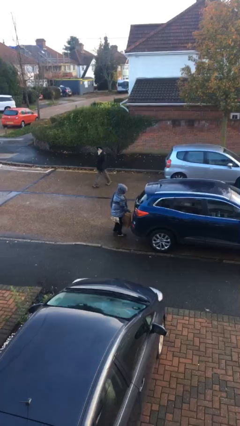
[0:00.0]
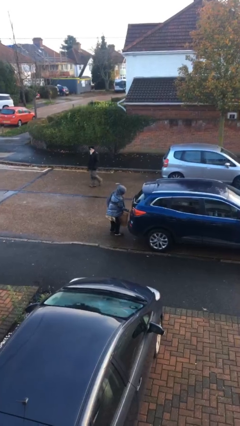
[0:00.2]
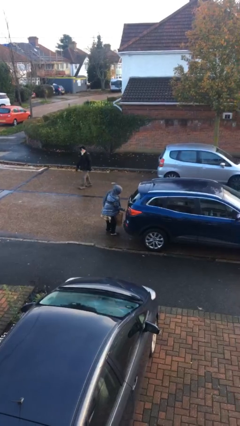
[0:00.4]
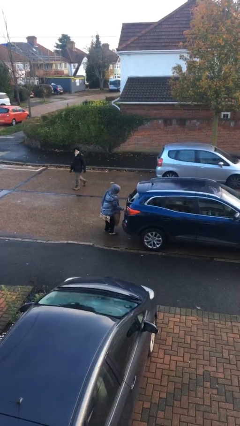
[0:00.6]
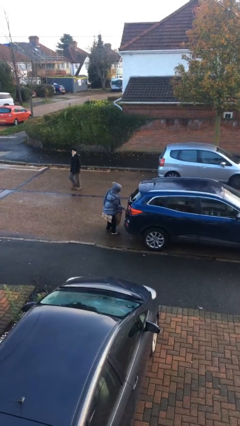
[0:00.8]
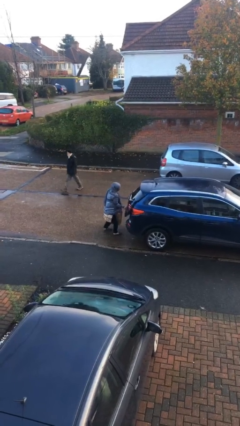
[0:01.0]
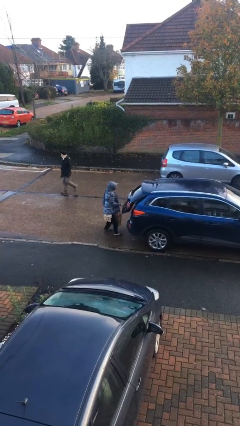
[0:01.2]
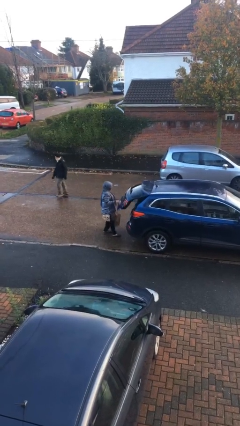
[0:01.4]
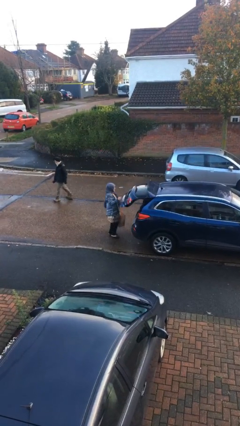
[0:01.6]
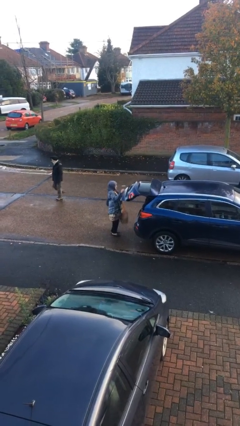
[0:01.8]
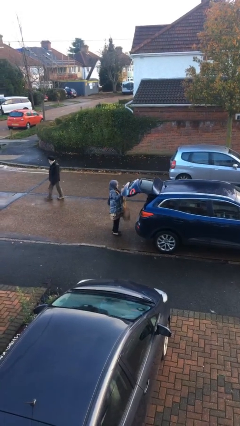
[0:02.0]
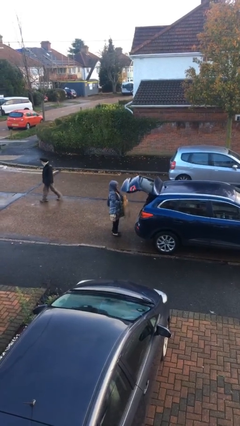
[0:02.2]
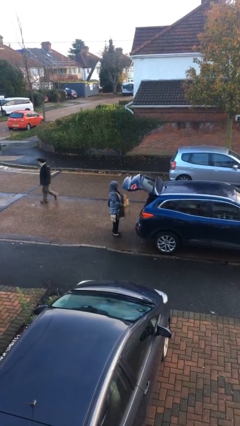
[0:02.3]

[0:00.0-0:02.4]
person opens car trunk

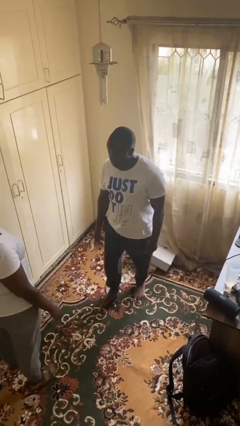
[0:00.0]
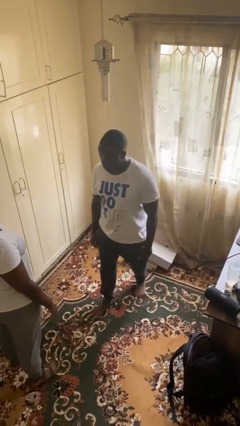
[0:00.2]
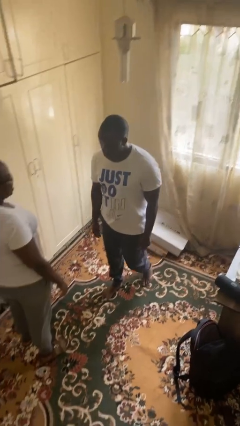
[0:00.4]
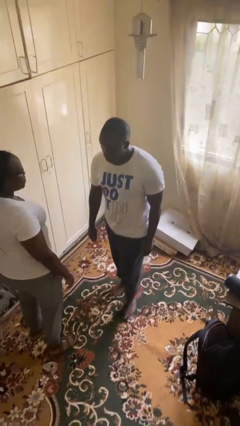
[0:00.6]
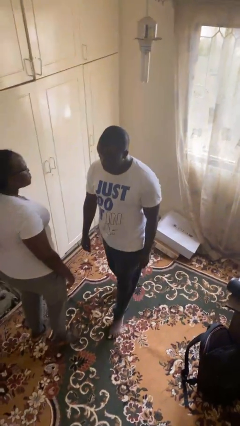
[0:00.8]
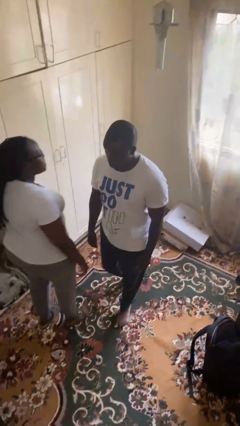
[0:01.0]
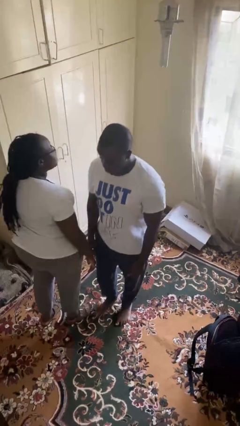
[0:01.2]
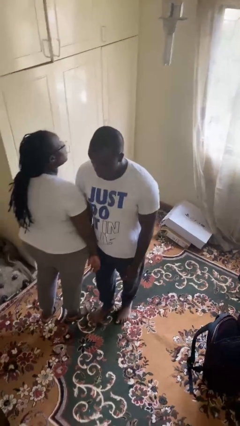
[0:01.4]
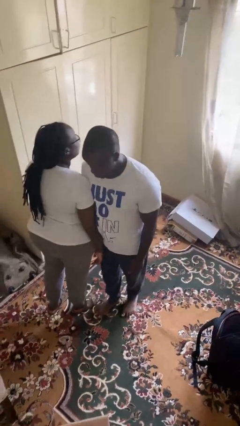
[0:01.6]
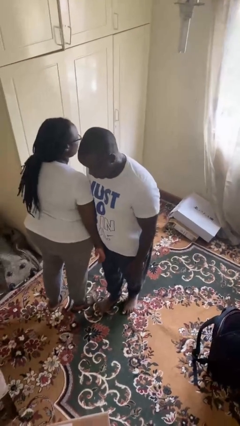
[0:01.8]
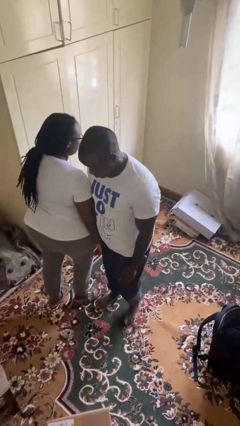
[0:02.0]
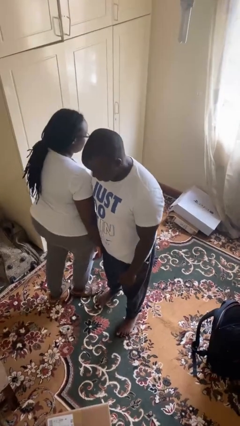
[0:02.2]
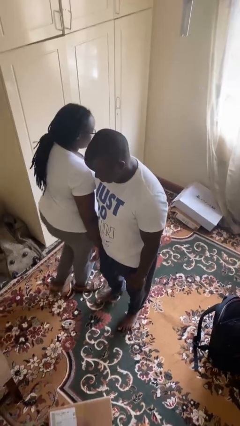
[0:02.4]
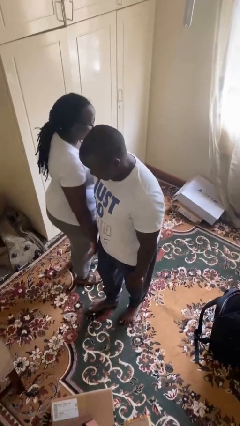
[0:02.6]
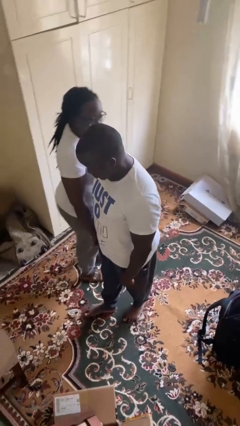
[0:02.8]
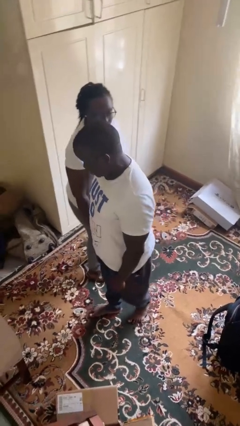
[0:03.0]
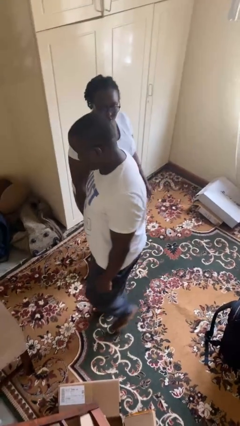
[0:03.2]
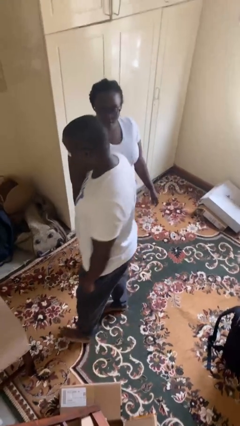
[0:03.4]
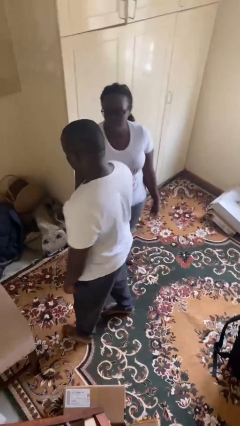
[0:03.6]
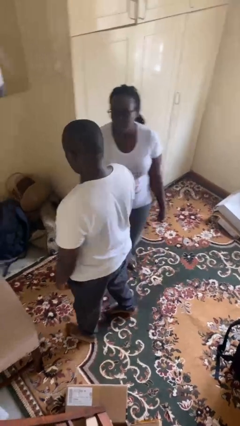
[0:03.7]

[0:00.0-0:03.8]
person bumps into person

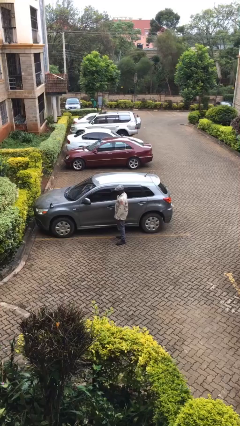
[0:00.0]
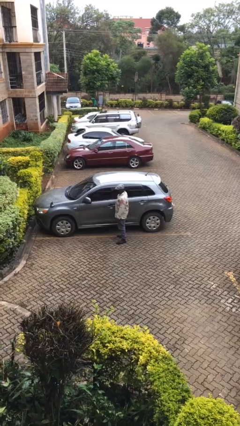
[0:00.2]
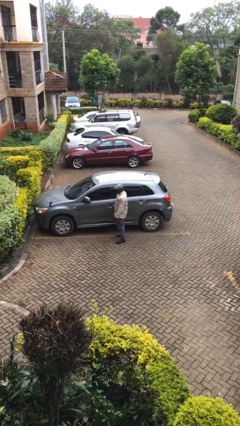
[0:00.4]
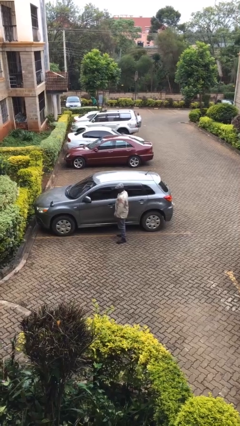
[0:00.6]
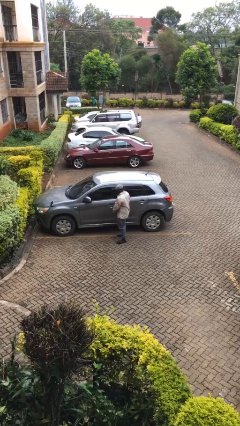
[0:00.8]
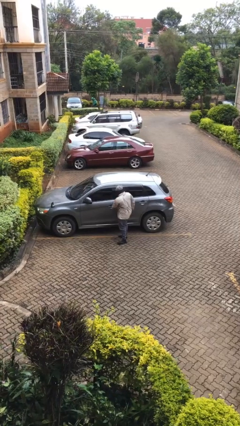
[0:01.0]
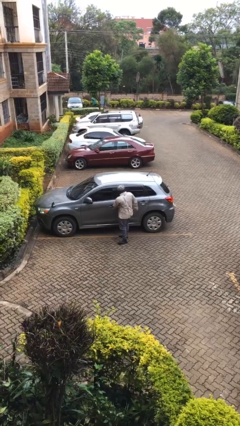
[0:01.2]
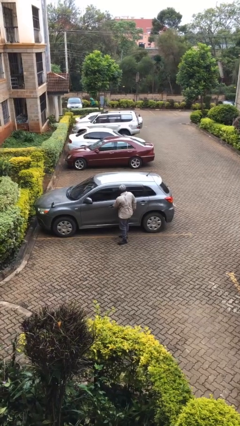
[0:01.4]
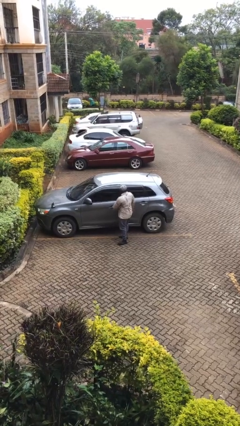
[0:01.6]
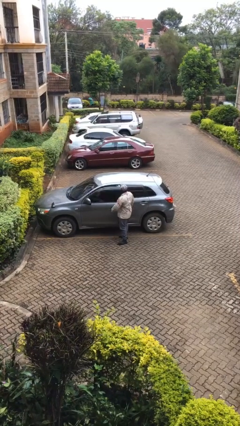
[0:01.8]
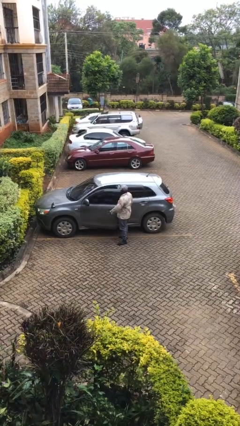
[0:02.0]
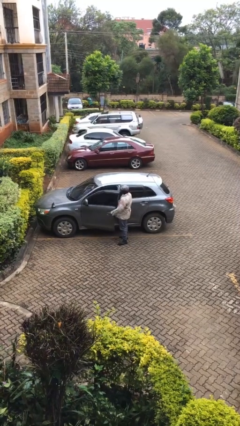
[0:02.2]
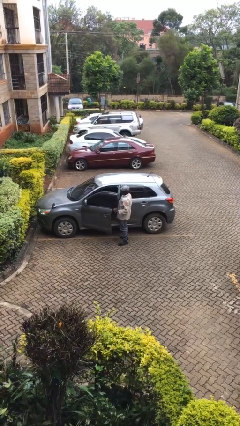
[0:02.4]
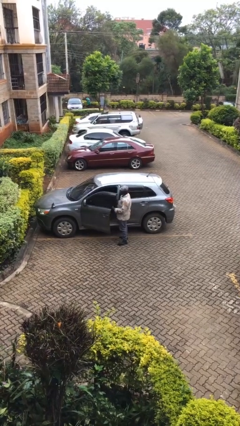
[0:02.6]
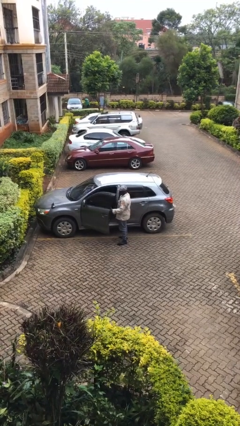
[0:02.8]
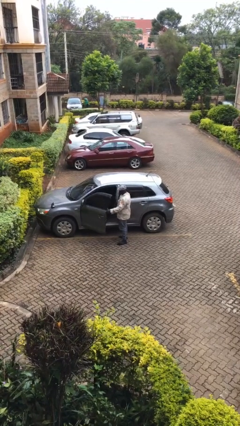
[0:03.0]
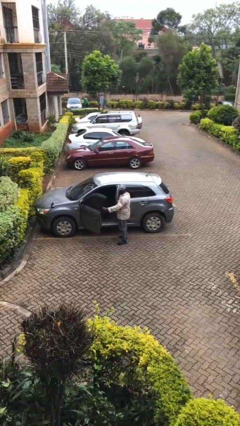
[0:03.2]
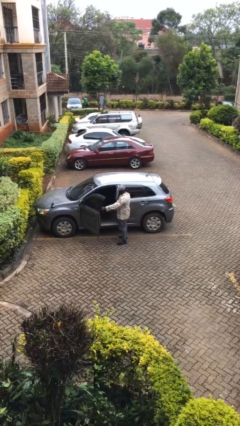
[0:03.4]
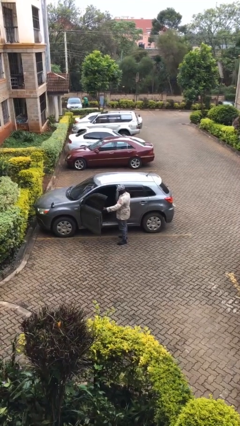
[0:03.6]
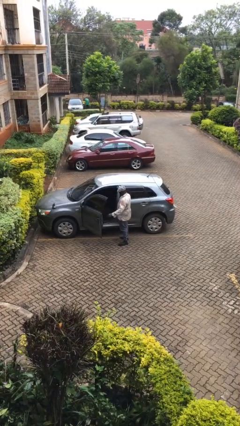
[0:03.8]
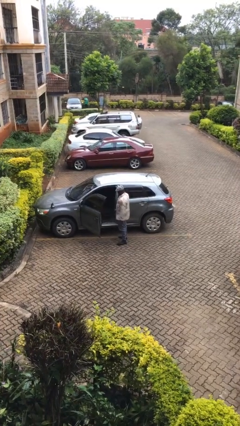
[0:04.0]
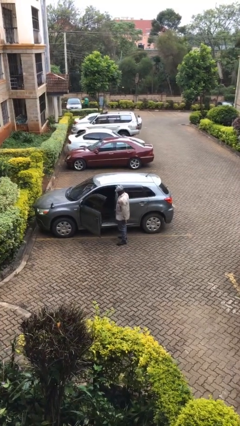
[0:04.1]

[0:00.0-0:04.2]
person opens car door

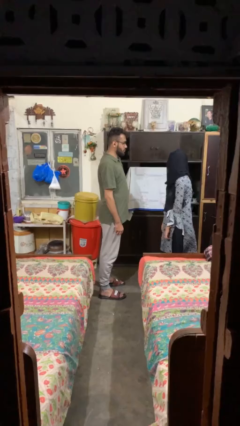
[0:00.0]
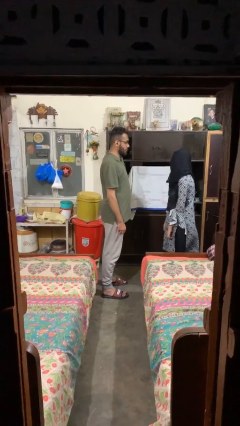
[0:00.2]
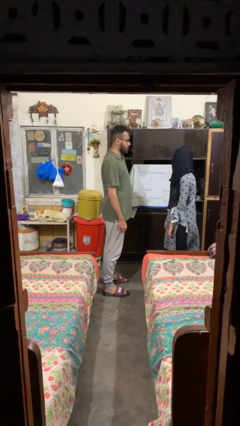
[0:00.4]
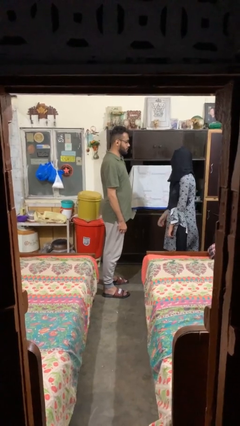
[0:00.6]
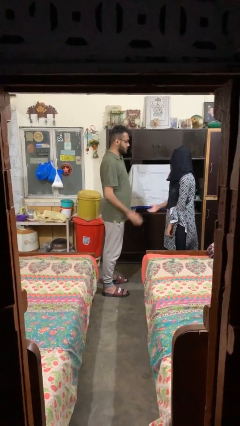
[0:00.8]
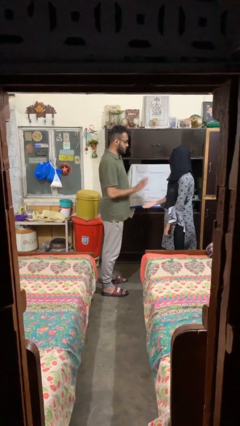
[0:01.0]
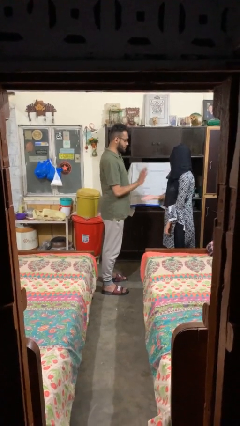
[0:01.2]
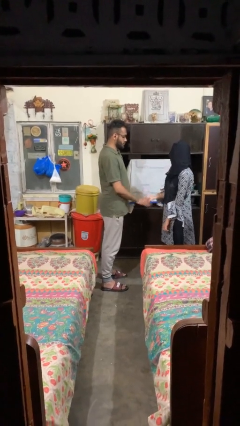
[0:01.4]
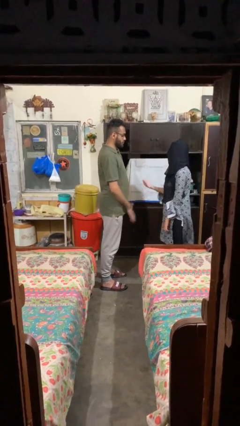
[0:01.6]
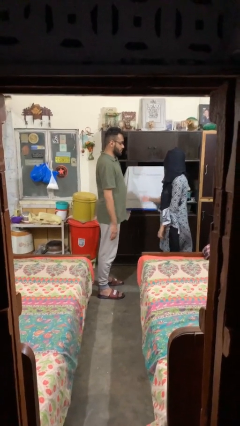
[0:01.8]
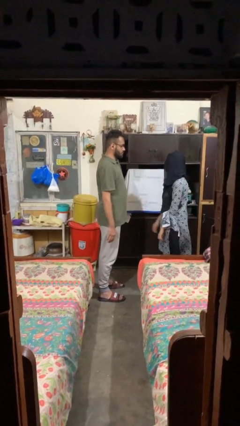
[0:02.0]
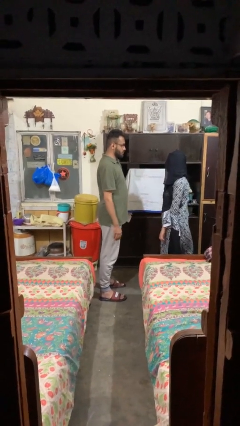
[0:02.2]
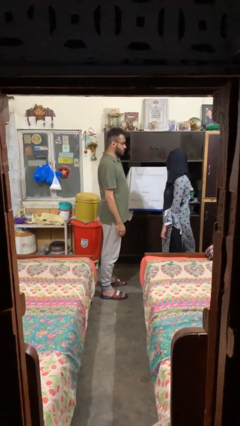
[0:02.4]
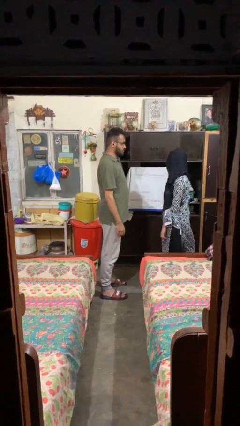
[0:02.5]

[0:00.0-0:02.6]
person highfives hand

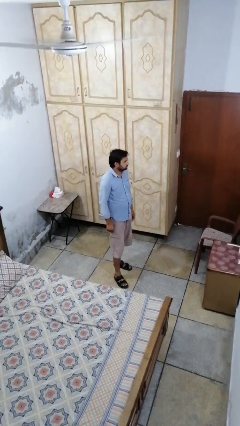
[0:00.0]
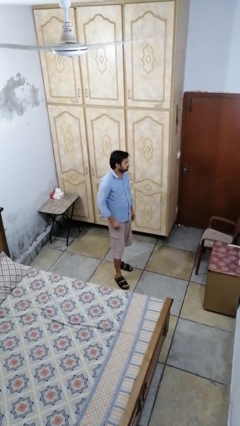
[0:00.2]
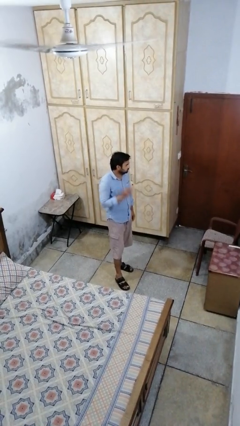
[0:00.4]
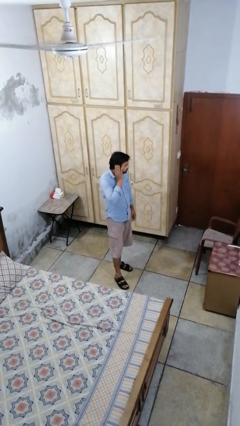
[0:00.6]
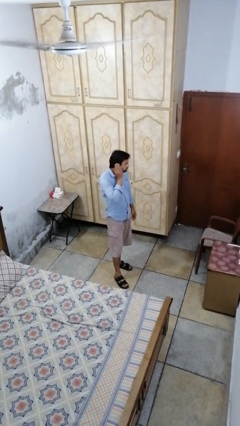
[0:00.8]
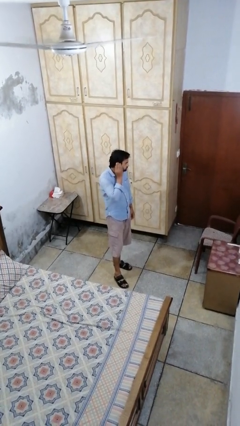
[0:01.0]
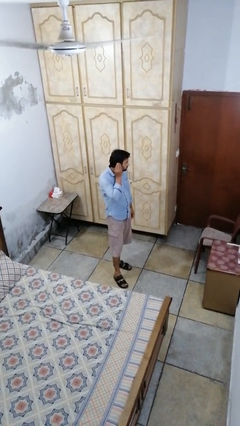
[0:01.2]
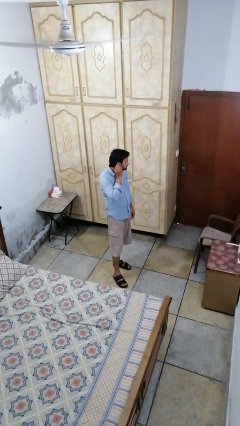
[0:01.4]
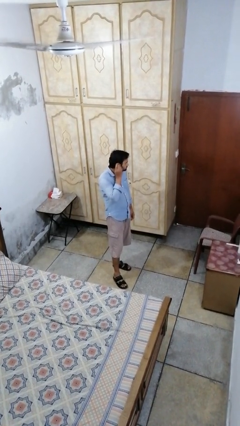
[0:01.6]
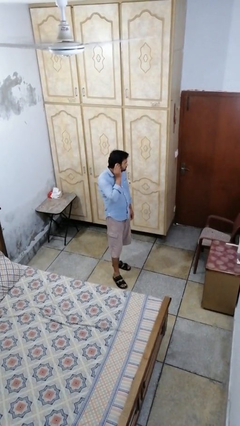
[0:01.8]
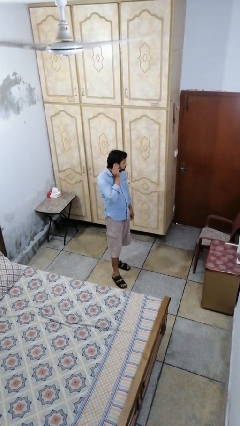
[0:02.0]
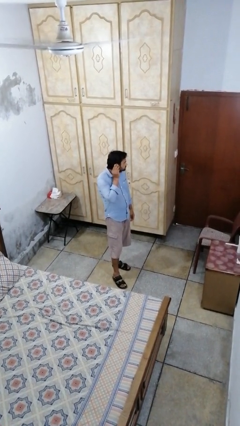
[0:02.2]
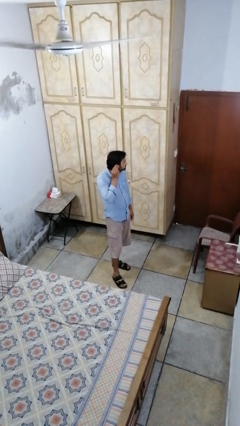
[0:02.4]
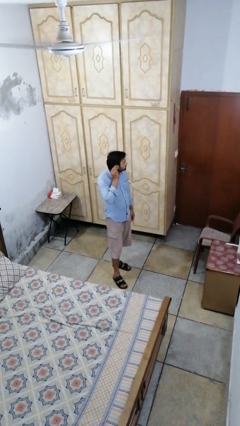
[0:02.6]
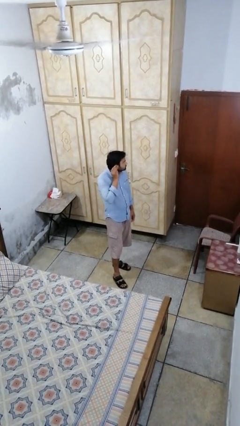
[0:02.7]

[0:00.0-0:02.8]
person touches earlobe

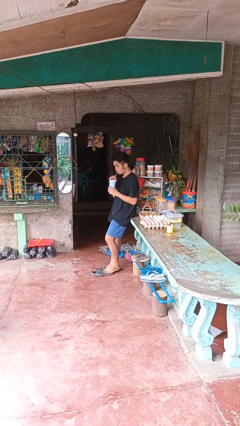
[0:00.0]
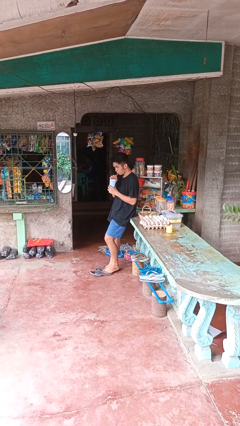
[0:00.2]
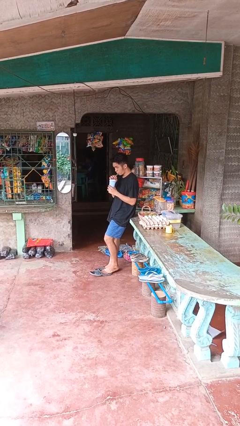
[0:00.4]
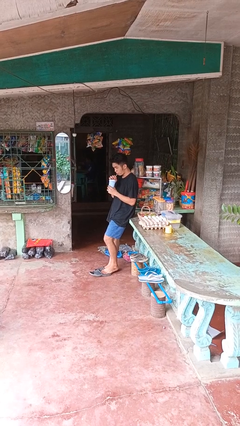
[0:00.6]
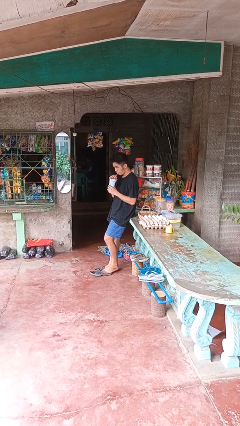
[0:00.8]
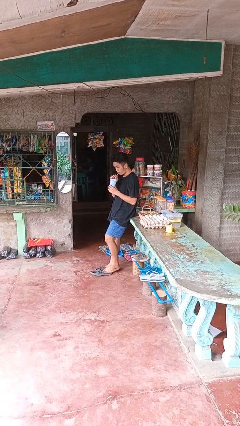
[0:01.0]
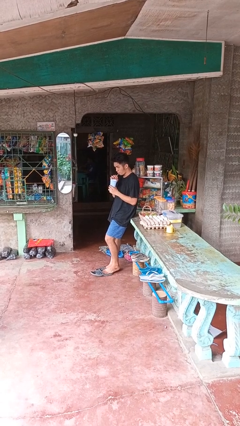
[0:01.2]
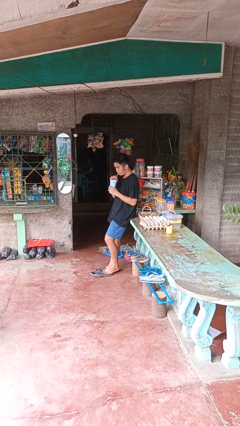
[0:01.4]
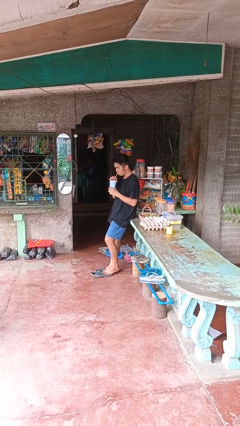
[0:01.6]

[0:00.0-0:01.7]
person drinks from straw
